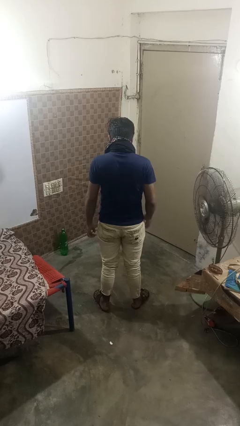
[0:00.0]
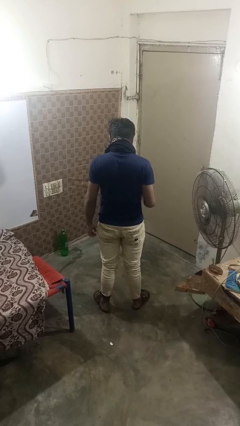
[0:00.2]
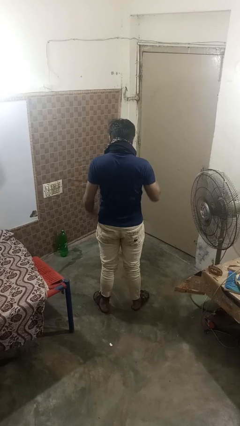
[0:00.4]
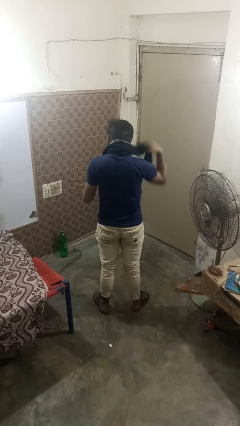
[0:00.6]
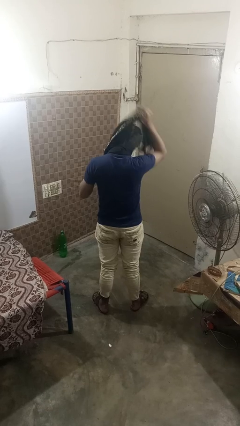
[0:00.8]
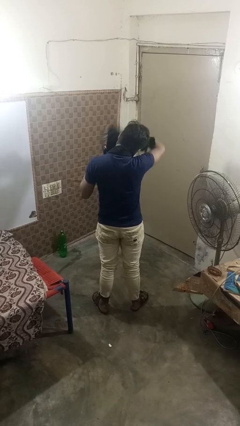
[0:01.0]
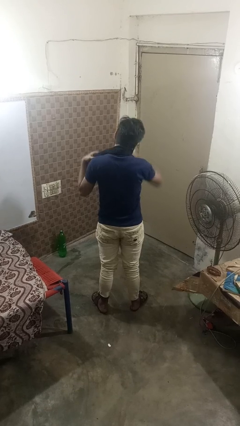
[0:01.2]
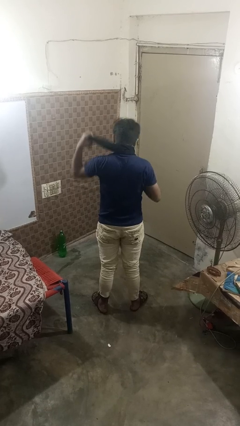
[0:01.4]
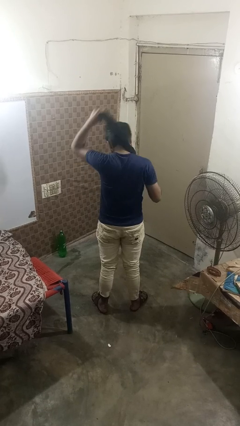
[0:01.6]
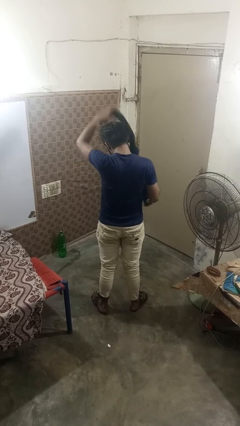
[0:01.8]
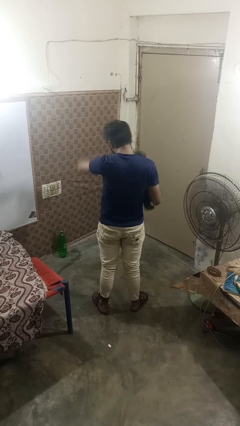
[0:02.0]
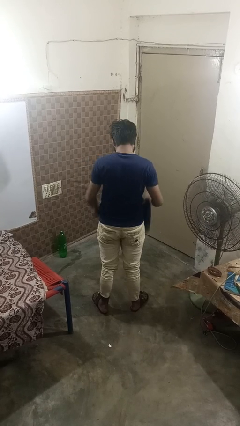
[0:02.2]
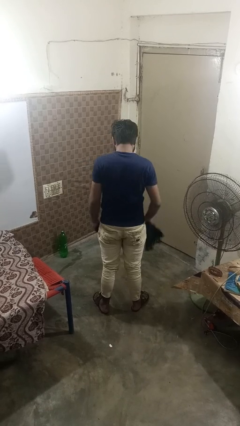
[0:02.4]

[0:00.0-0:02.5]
person takes off scarf

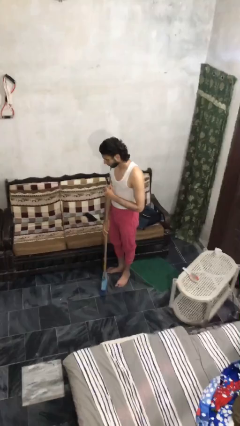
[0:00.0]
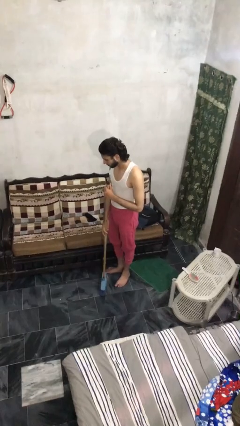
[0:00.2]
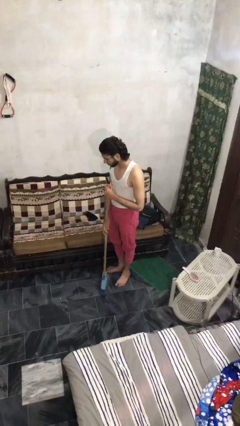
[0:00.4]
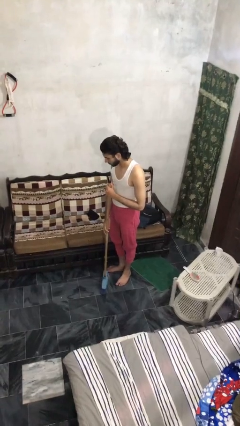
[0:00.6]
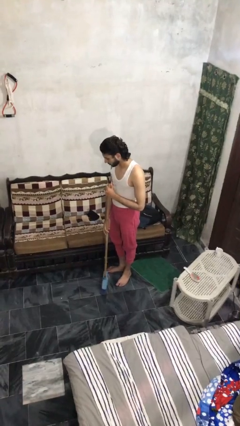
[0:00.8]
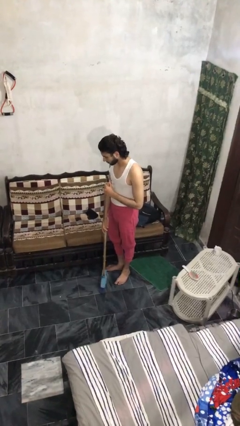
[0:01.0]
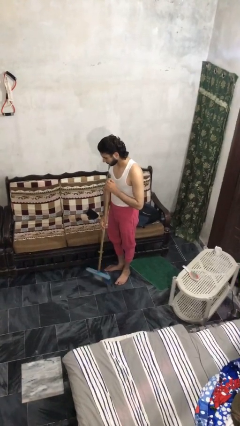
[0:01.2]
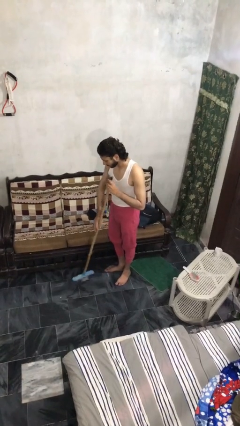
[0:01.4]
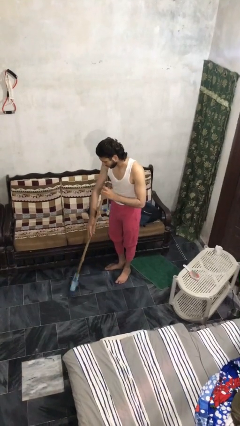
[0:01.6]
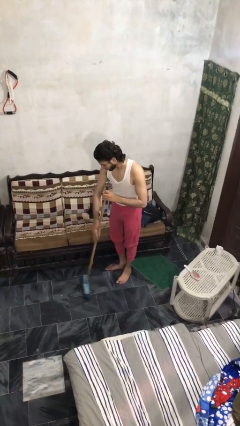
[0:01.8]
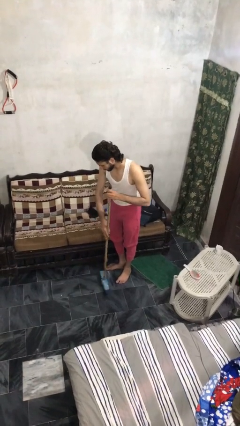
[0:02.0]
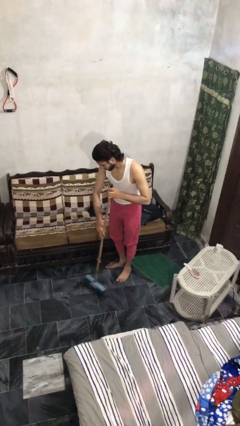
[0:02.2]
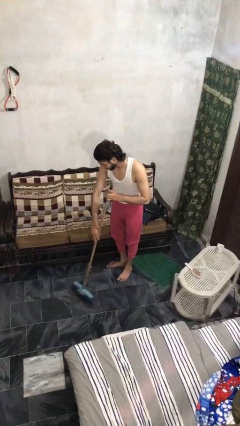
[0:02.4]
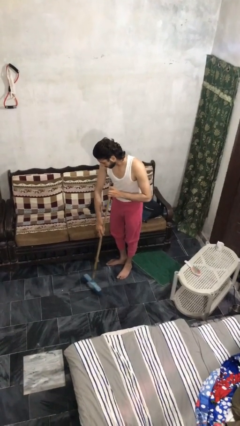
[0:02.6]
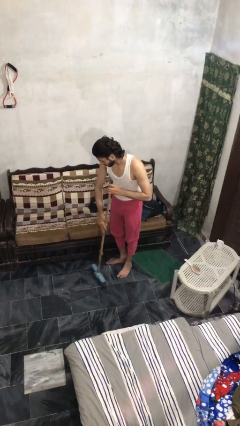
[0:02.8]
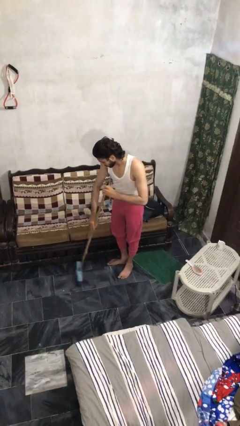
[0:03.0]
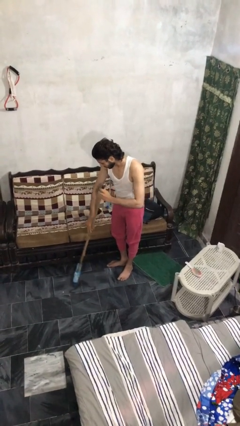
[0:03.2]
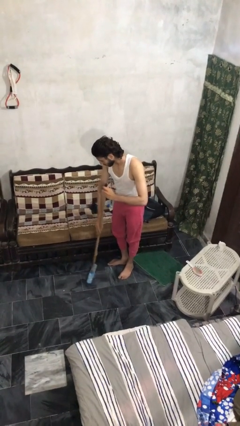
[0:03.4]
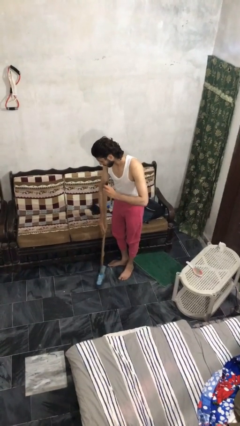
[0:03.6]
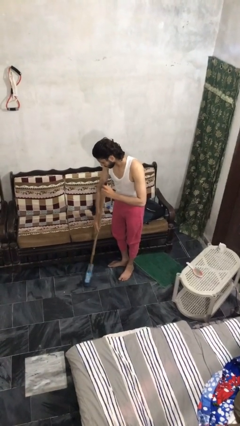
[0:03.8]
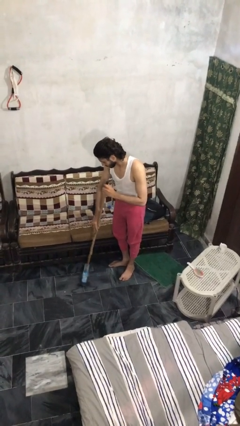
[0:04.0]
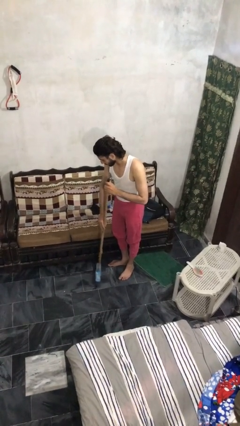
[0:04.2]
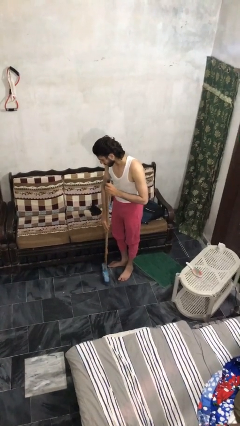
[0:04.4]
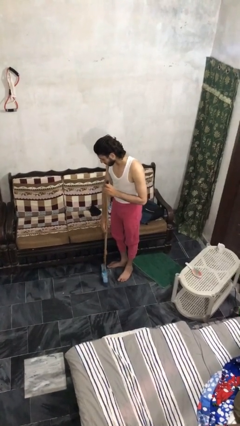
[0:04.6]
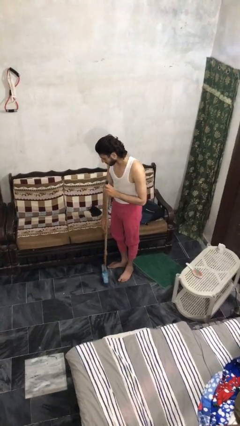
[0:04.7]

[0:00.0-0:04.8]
person sweeps floor

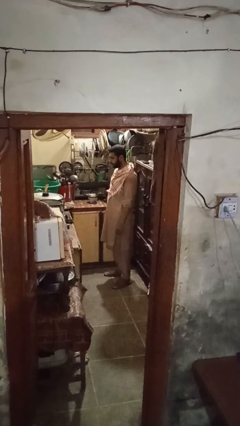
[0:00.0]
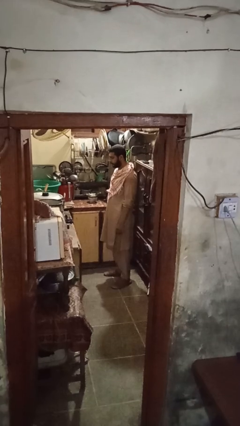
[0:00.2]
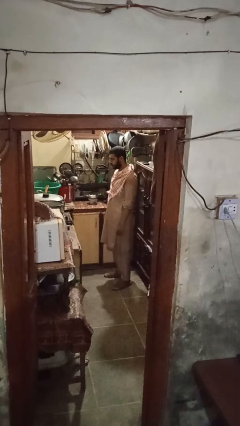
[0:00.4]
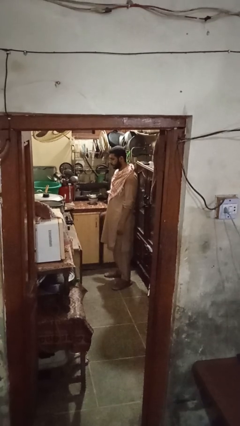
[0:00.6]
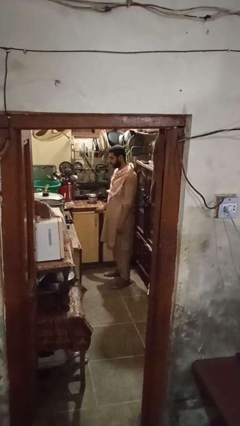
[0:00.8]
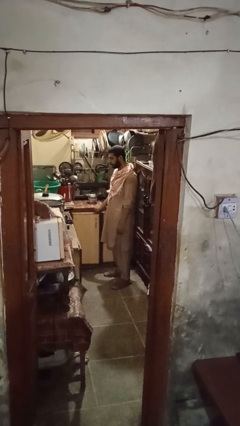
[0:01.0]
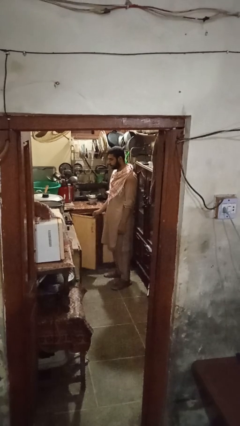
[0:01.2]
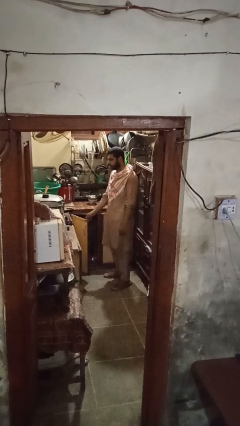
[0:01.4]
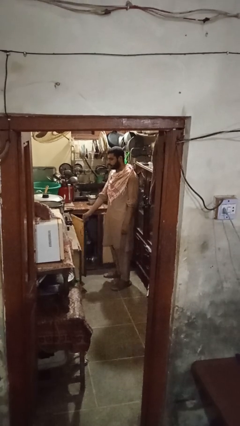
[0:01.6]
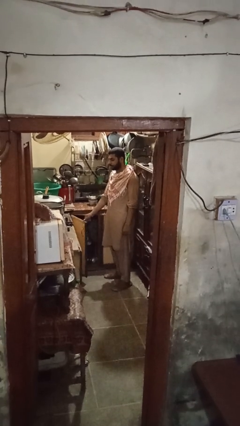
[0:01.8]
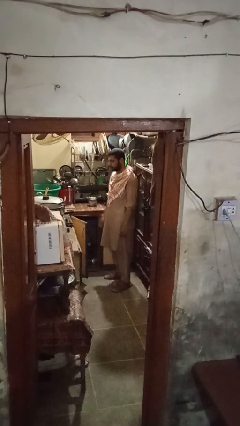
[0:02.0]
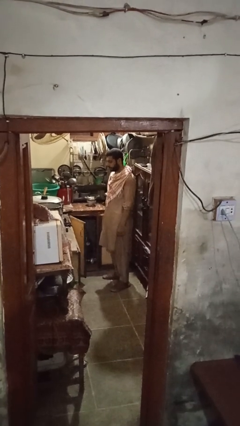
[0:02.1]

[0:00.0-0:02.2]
person opens cabinet

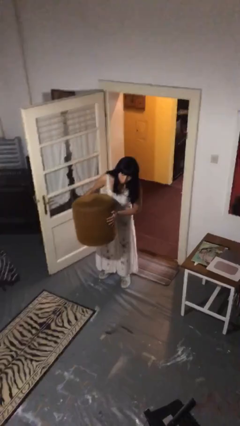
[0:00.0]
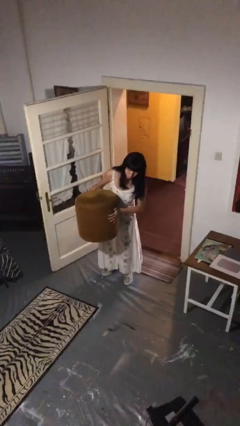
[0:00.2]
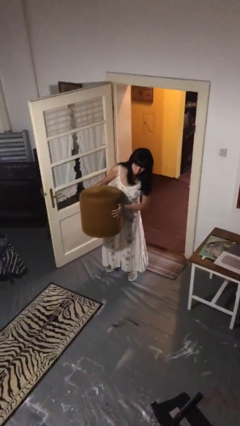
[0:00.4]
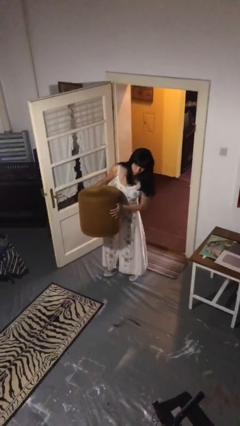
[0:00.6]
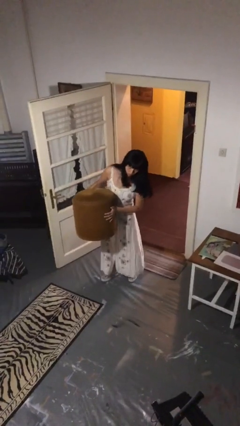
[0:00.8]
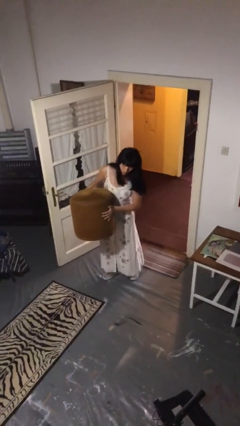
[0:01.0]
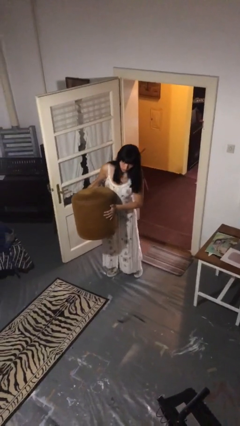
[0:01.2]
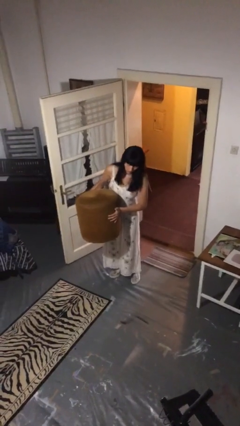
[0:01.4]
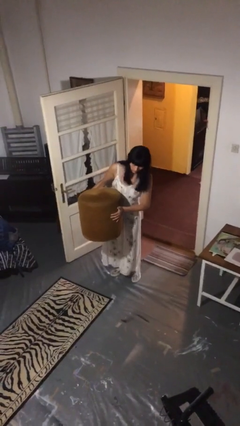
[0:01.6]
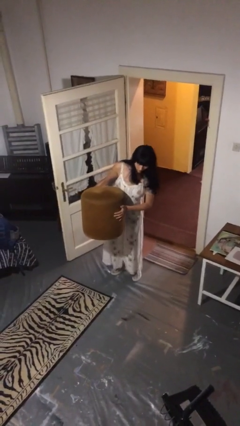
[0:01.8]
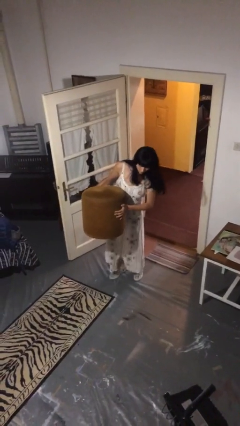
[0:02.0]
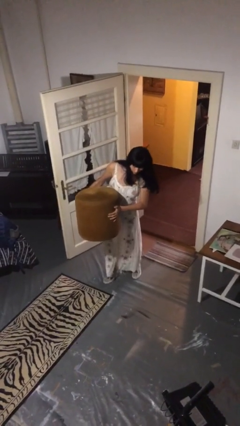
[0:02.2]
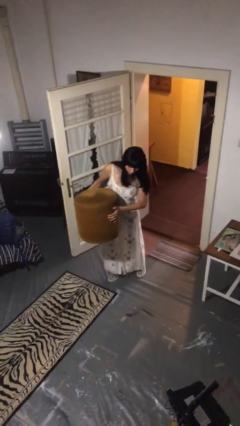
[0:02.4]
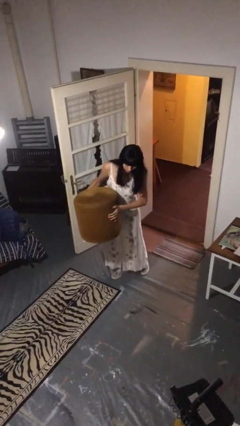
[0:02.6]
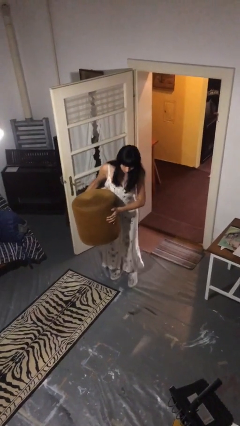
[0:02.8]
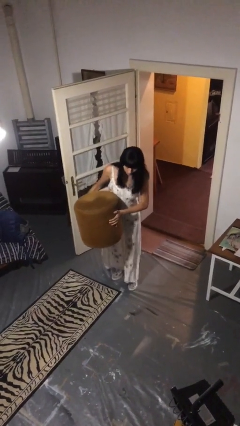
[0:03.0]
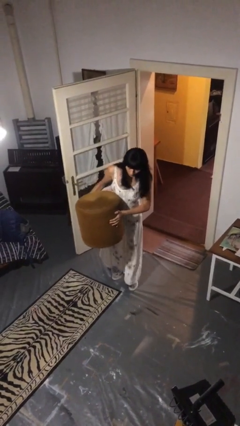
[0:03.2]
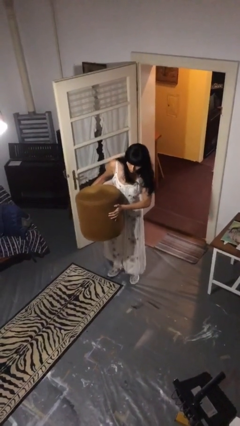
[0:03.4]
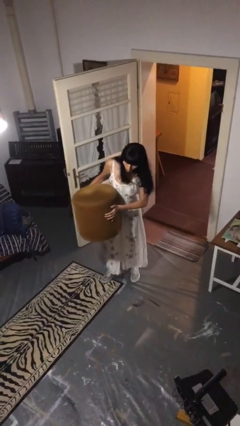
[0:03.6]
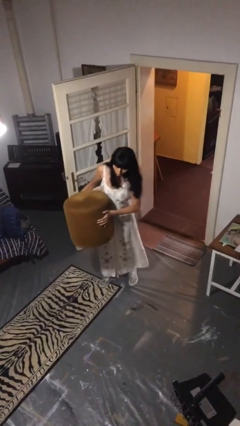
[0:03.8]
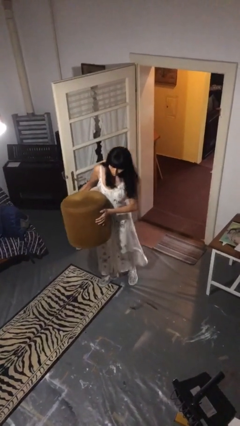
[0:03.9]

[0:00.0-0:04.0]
person carries heavy object

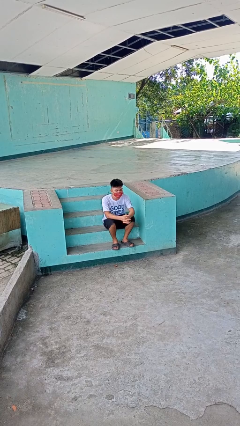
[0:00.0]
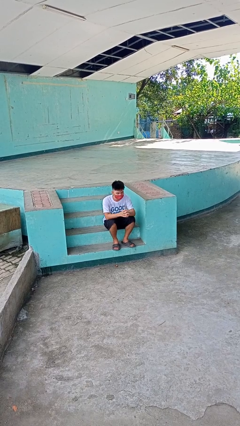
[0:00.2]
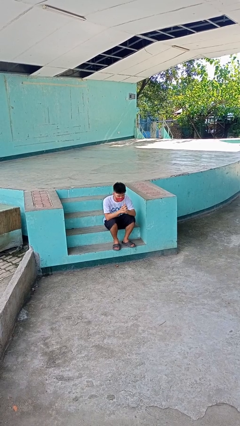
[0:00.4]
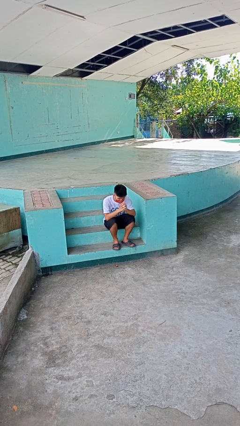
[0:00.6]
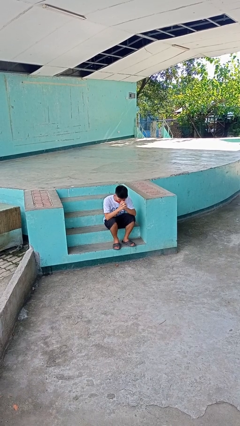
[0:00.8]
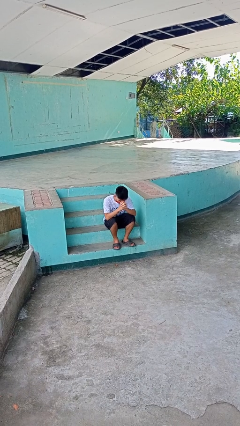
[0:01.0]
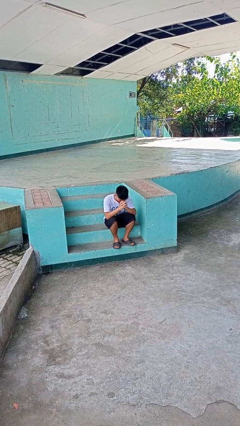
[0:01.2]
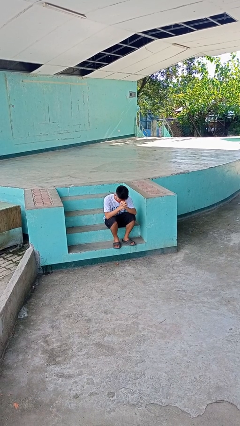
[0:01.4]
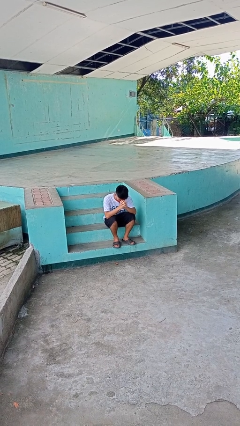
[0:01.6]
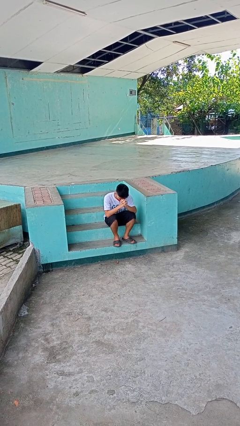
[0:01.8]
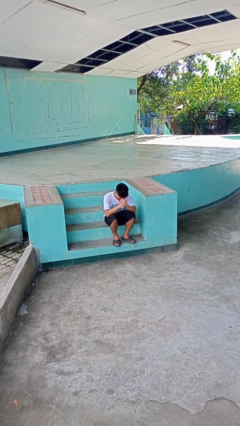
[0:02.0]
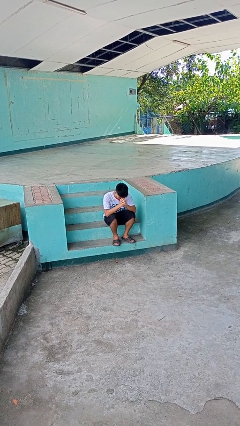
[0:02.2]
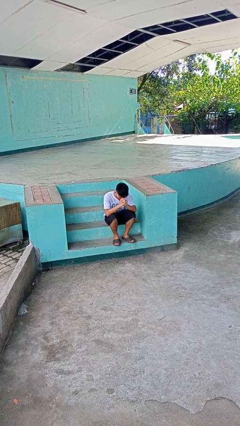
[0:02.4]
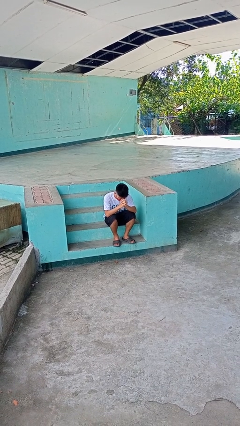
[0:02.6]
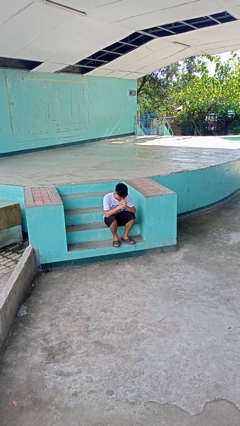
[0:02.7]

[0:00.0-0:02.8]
person prays

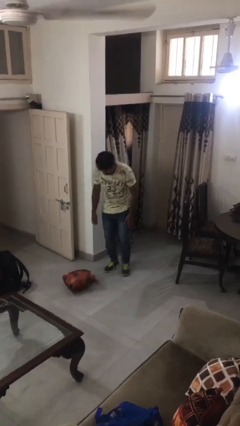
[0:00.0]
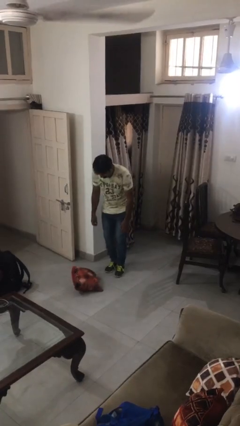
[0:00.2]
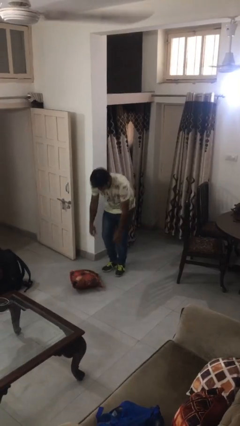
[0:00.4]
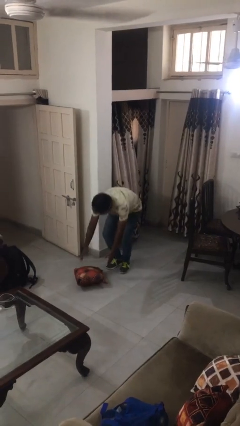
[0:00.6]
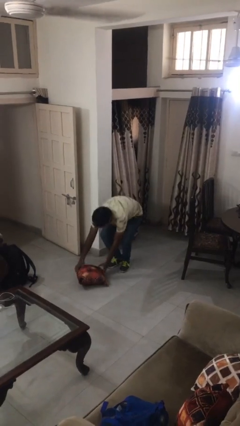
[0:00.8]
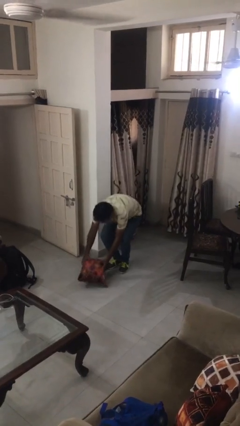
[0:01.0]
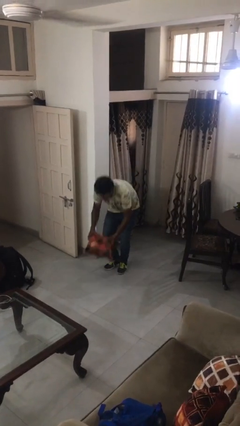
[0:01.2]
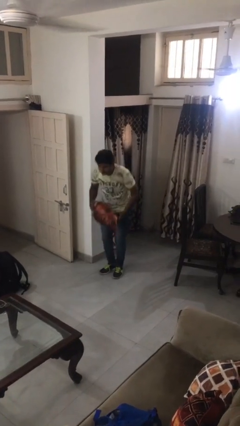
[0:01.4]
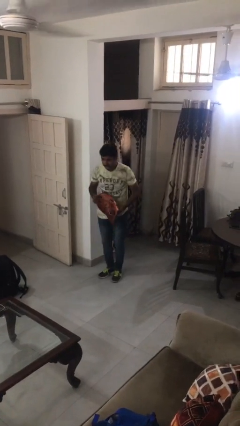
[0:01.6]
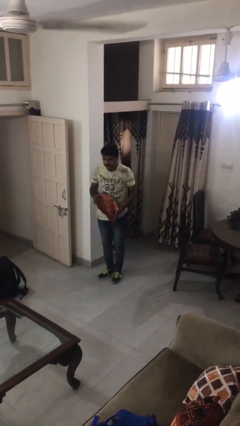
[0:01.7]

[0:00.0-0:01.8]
person picks up object from floor
